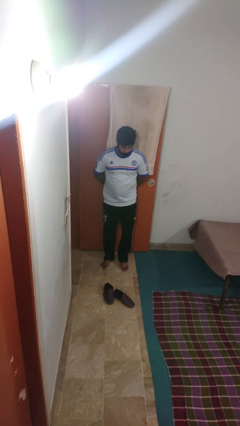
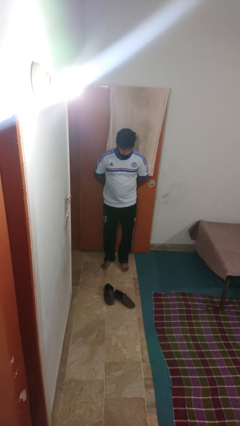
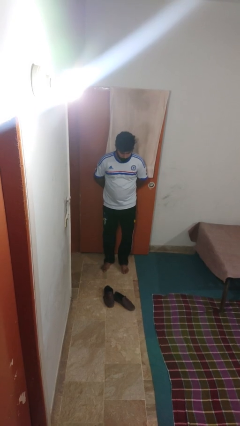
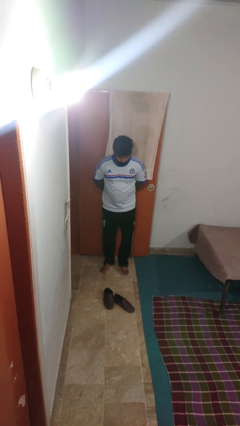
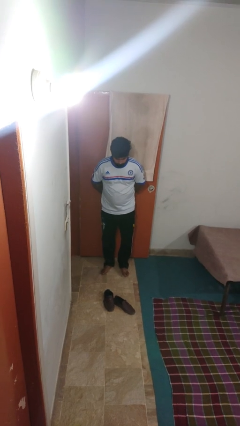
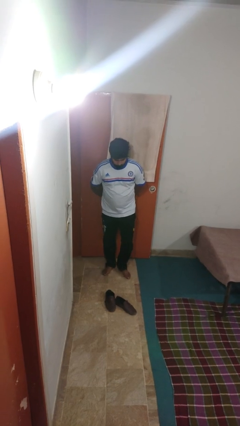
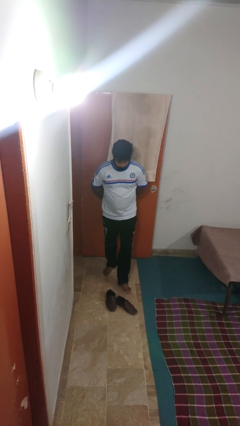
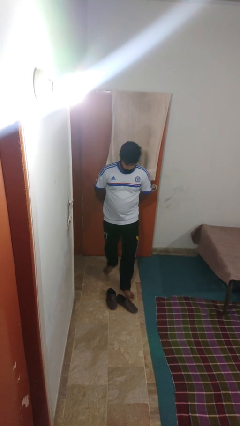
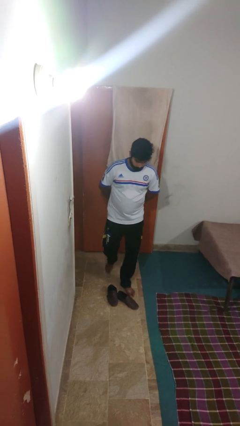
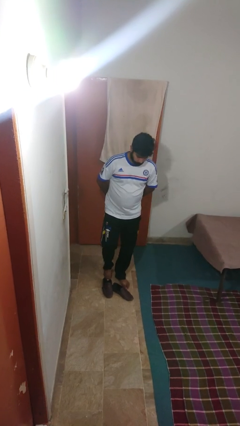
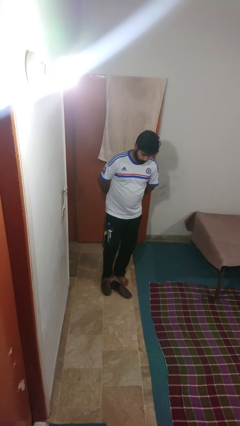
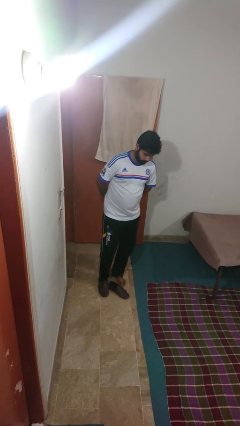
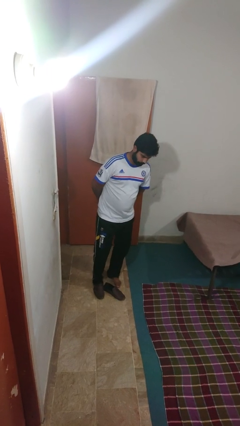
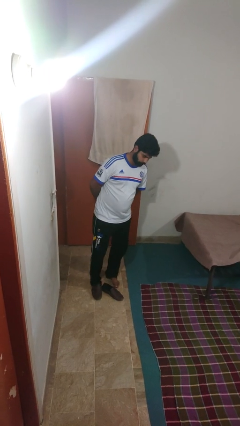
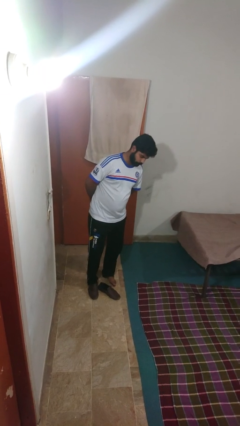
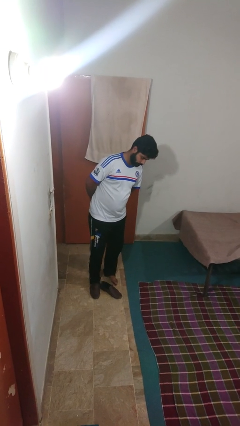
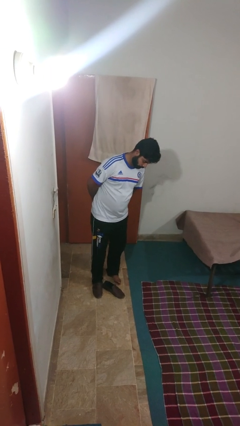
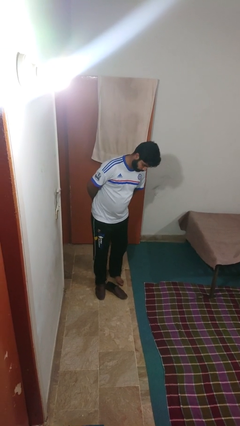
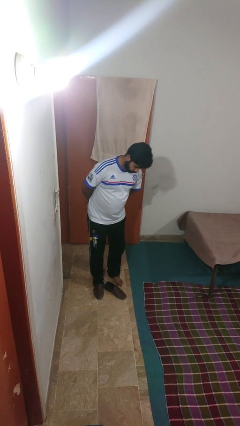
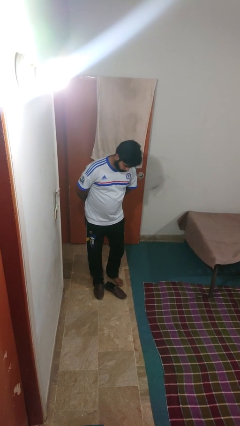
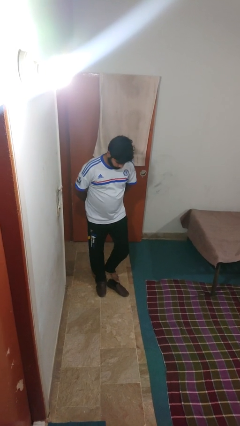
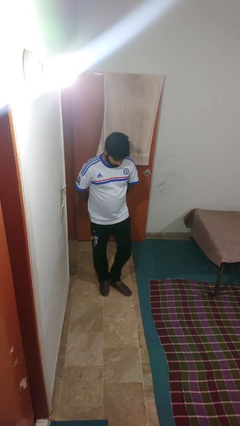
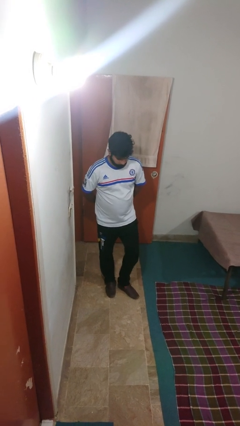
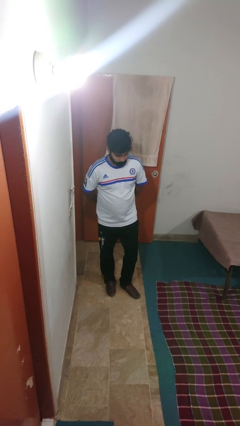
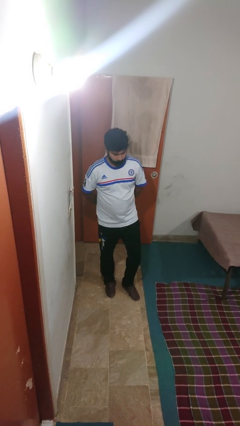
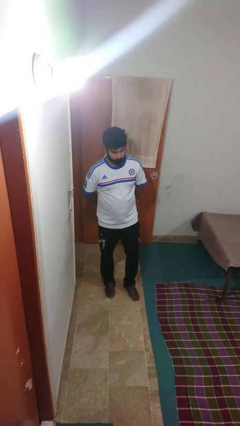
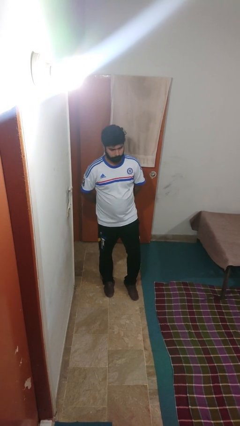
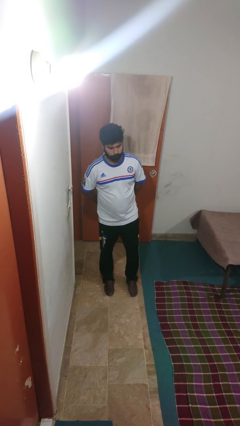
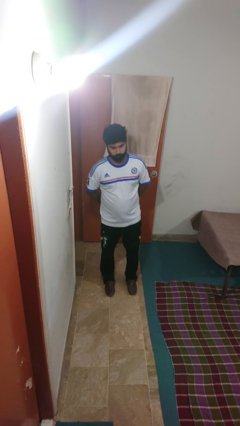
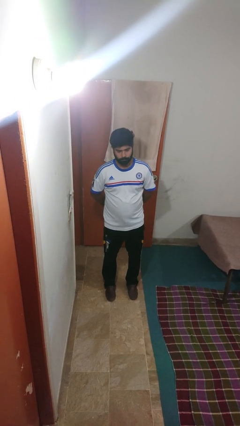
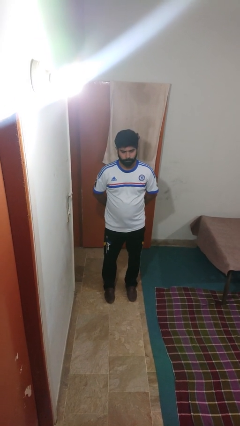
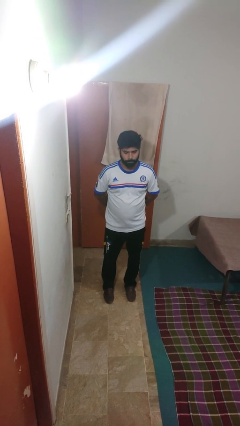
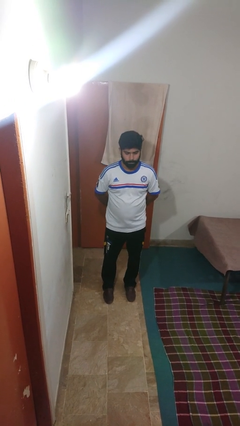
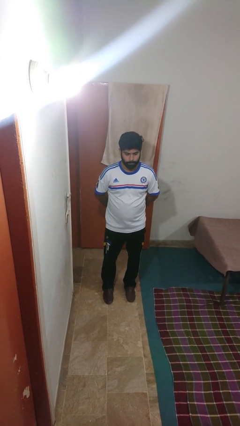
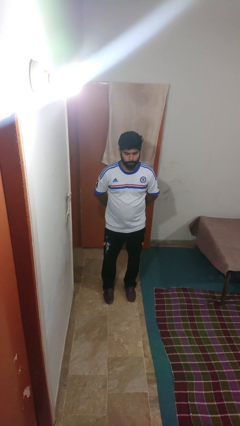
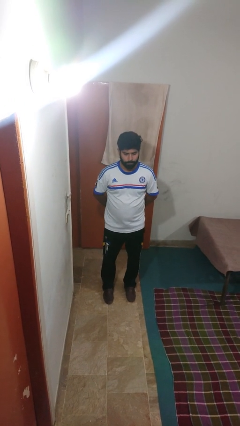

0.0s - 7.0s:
person puts on shoes

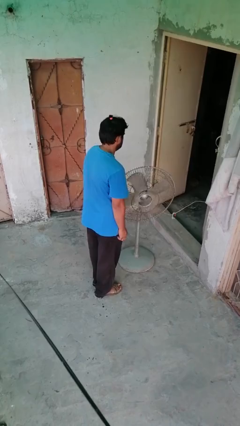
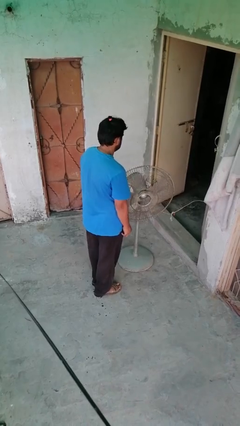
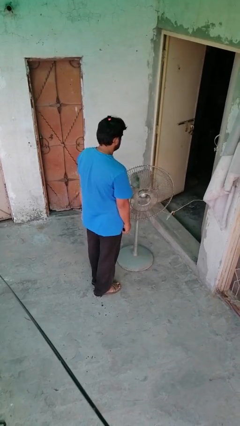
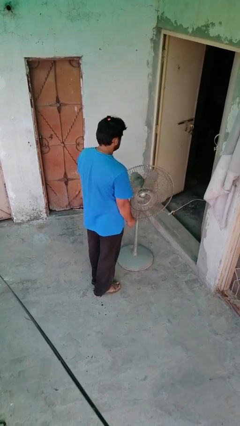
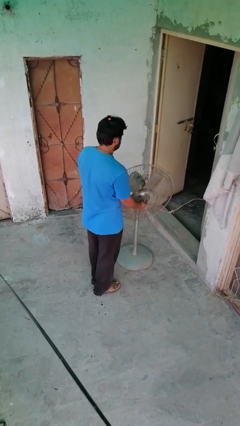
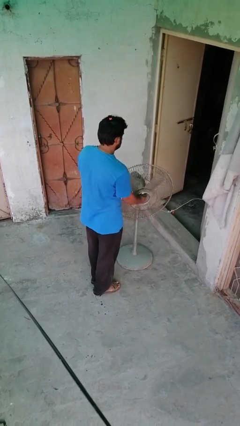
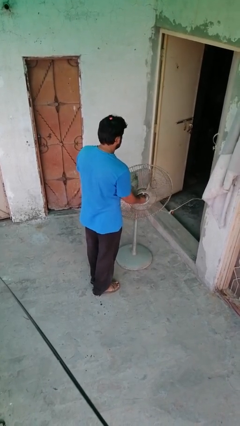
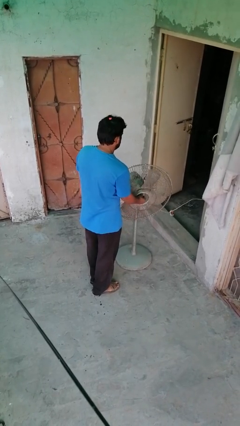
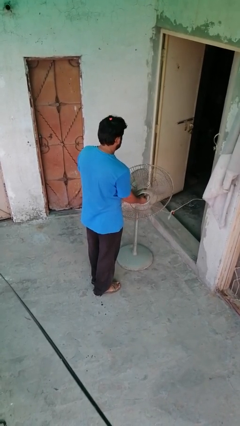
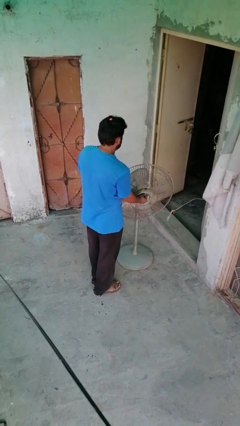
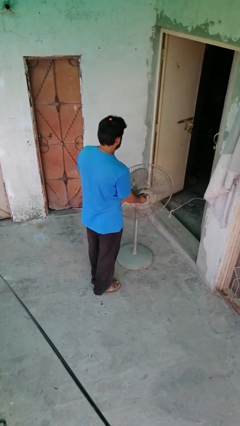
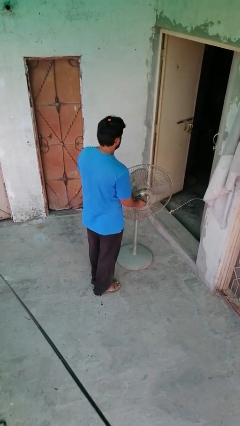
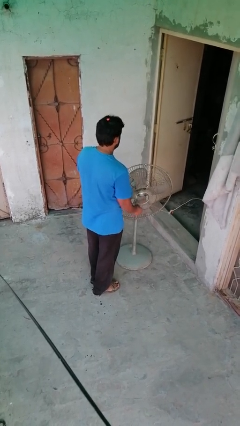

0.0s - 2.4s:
person turns off fan

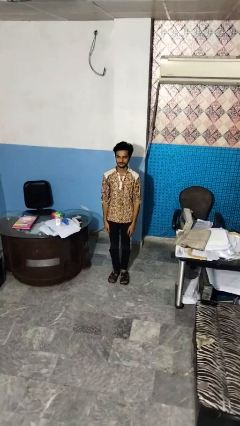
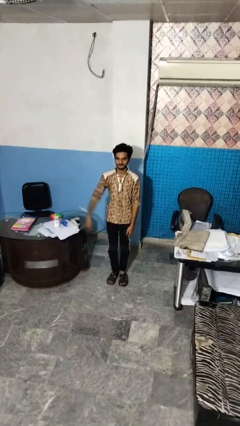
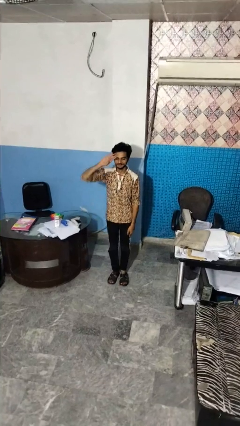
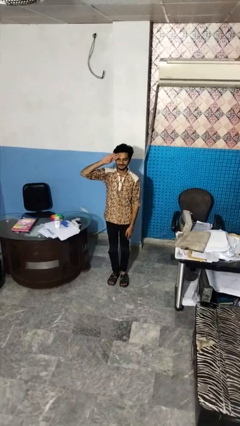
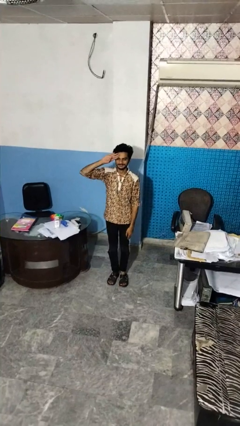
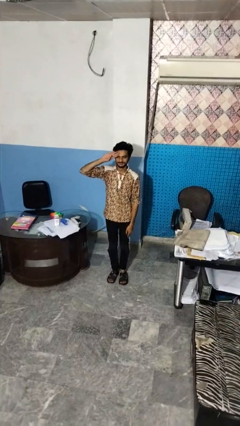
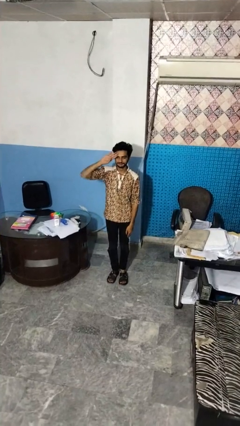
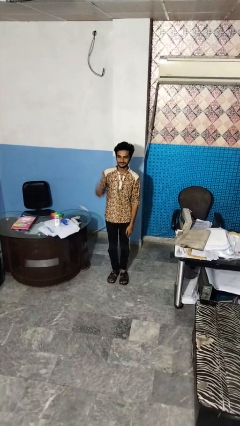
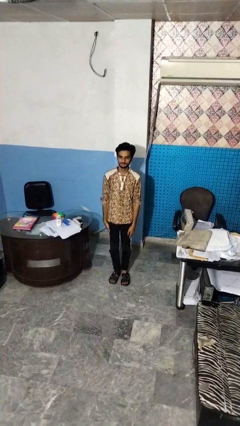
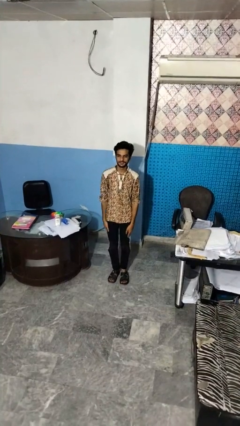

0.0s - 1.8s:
person salutes

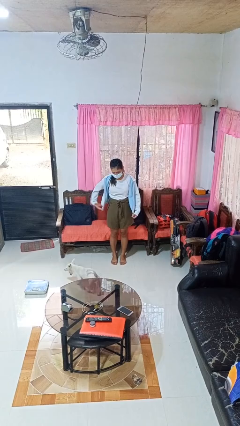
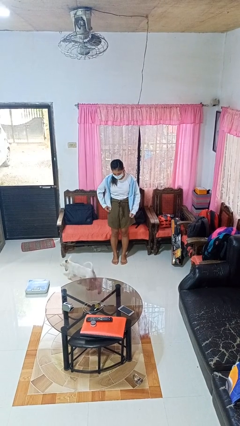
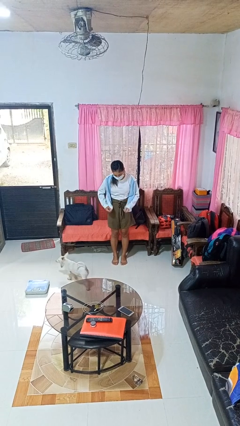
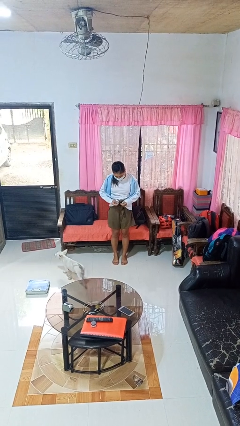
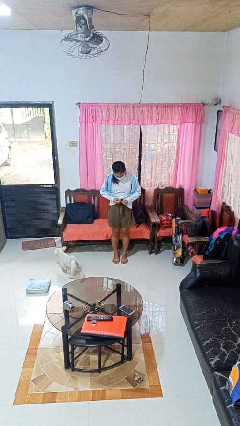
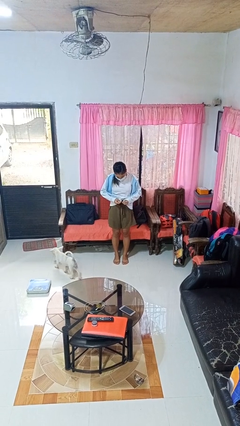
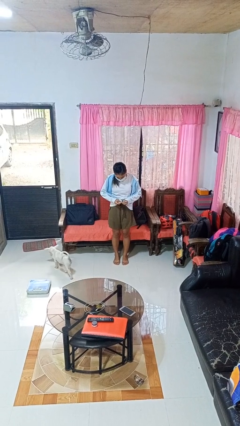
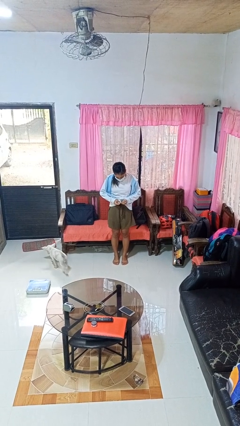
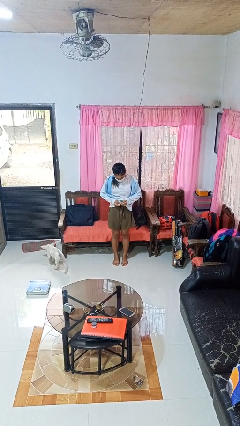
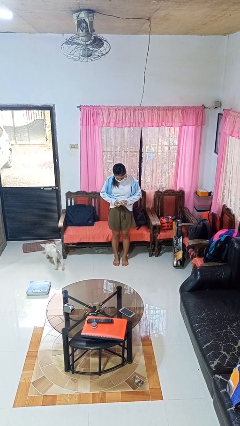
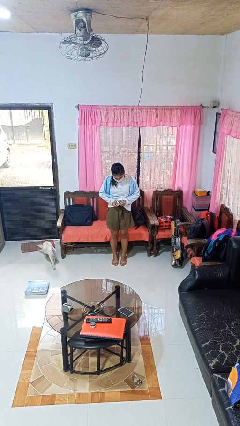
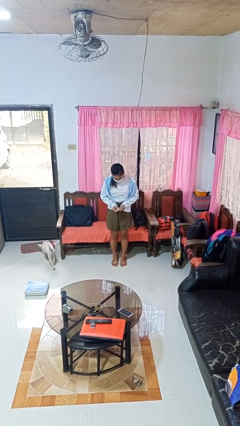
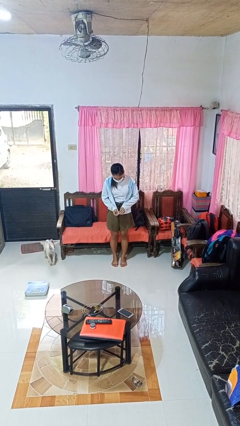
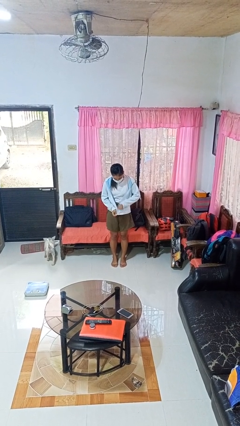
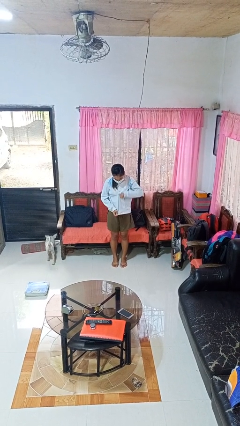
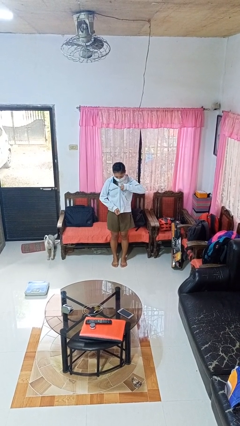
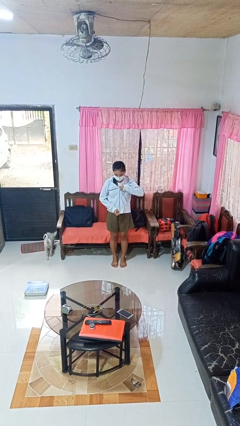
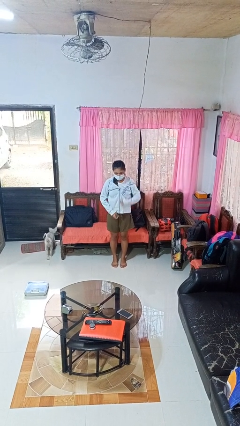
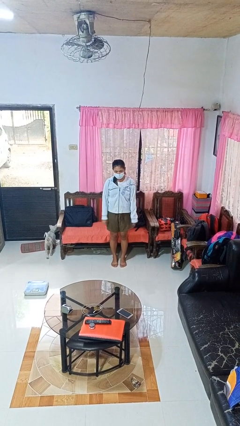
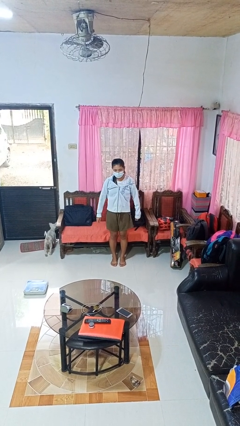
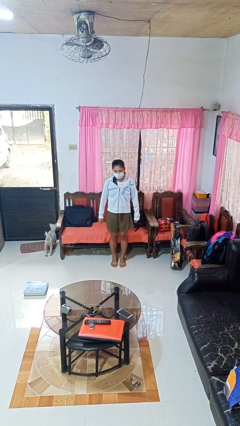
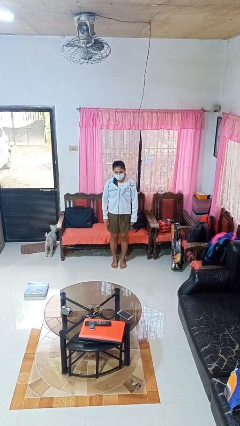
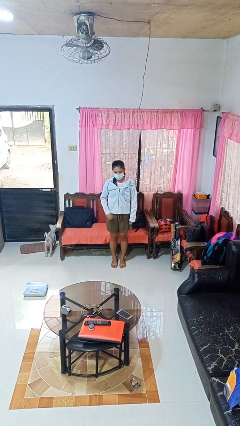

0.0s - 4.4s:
person zips up jacket

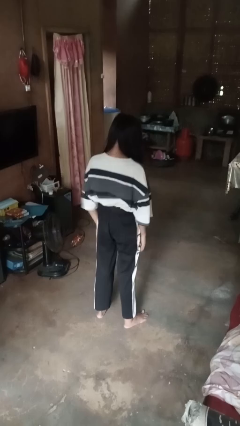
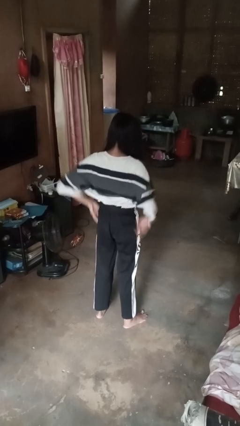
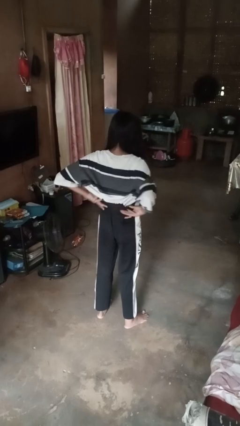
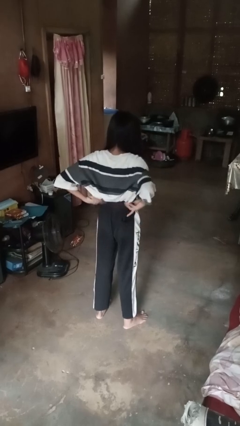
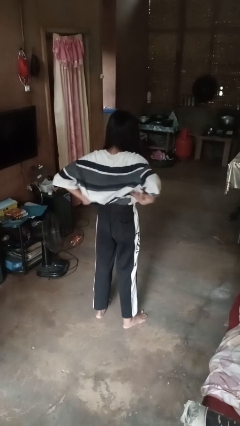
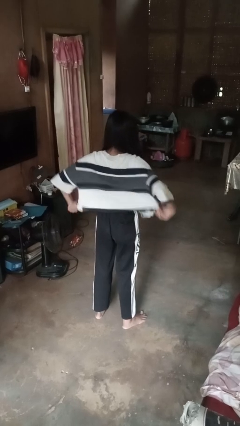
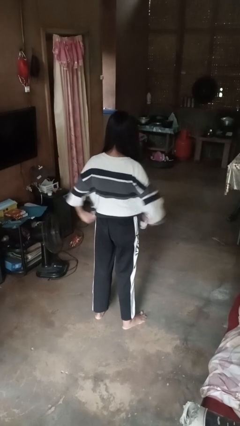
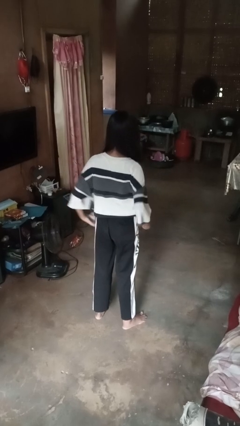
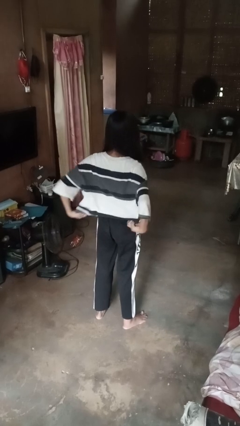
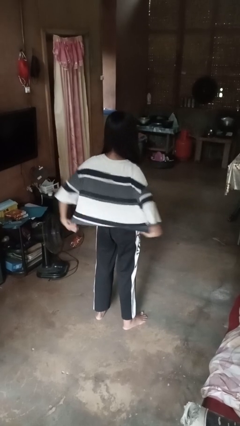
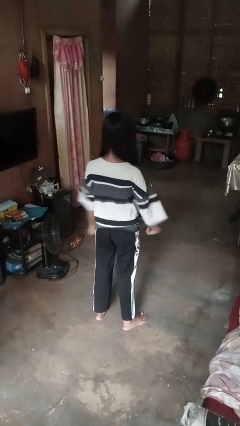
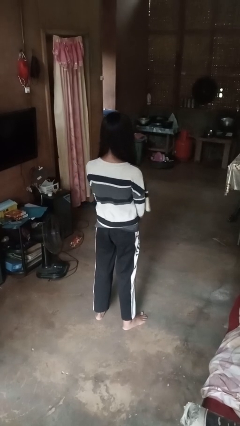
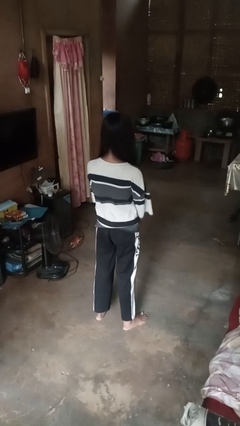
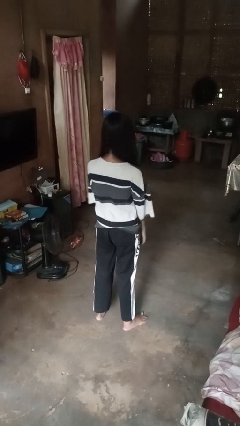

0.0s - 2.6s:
person untucks shirt
